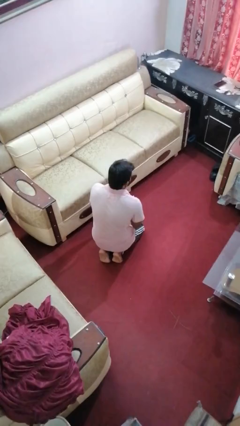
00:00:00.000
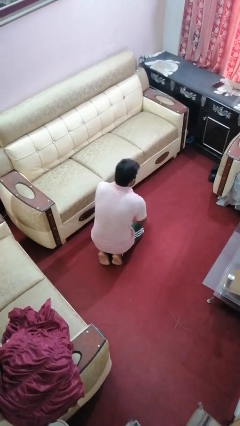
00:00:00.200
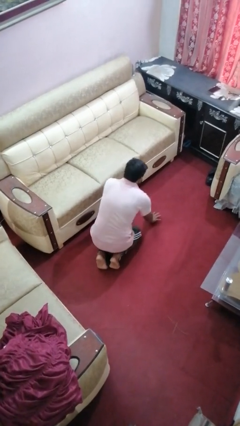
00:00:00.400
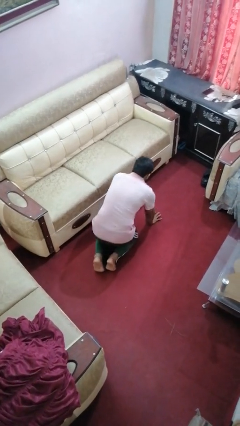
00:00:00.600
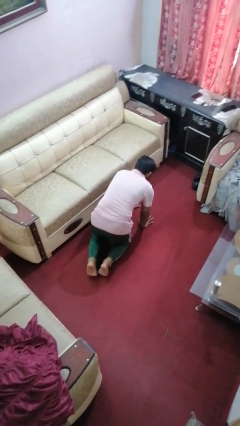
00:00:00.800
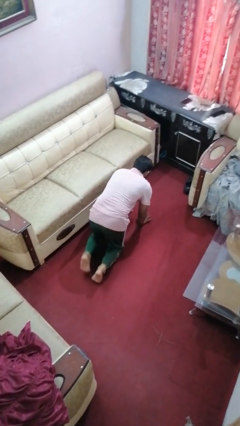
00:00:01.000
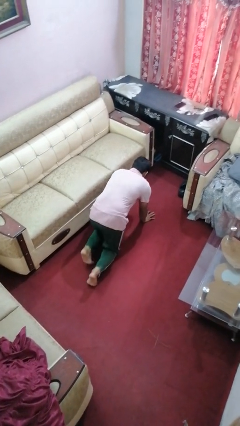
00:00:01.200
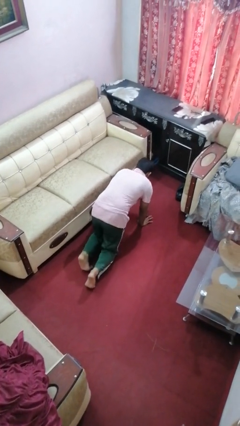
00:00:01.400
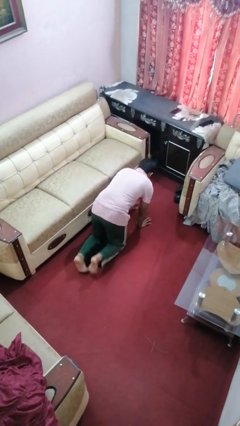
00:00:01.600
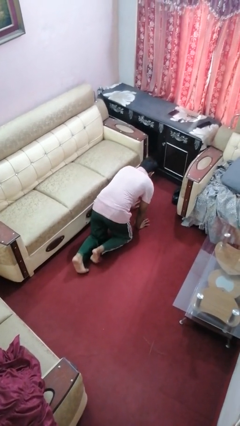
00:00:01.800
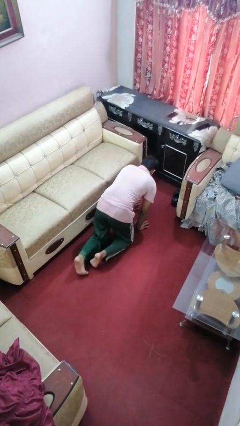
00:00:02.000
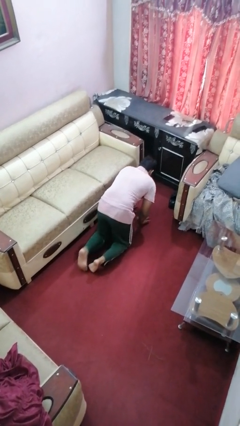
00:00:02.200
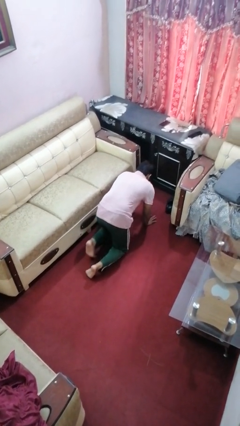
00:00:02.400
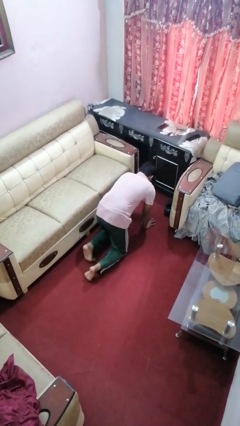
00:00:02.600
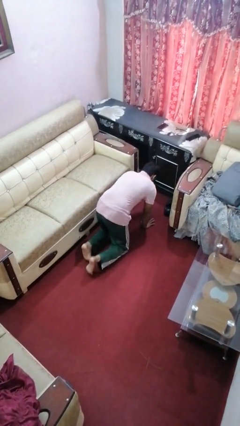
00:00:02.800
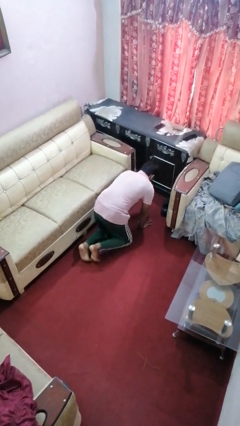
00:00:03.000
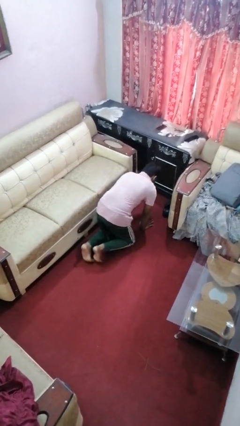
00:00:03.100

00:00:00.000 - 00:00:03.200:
person crawls

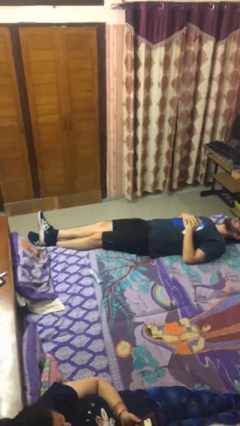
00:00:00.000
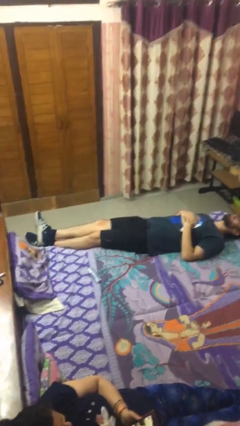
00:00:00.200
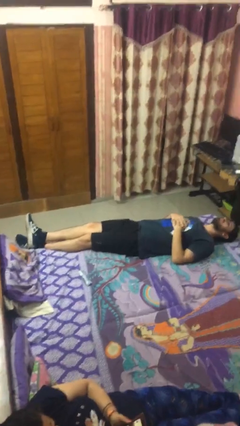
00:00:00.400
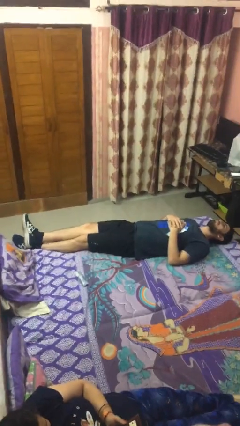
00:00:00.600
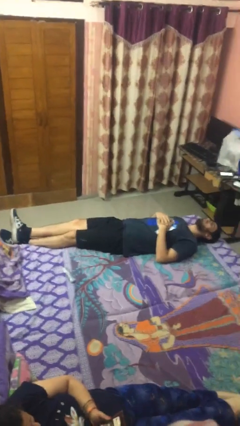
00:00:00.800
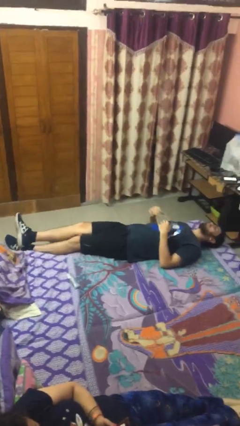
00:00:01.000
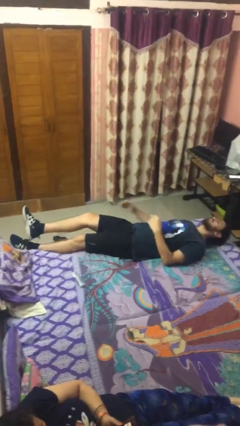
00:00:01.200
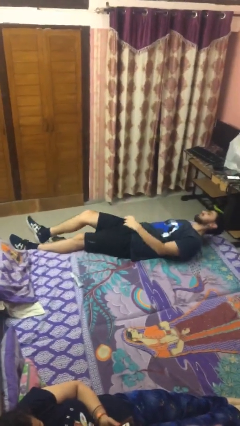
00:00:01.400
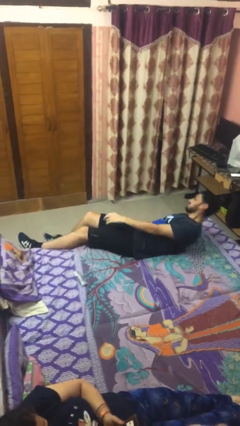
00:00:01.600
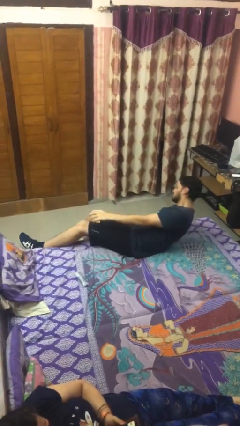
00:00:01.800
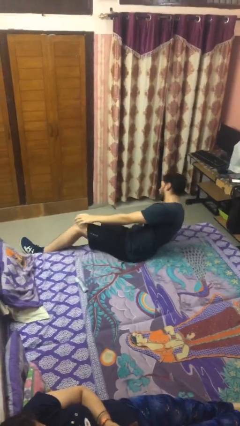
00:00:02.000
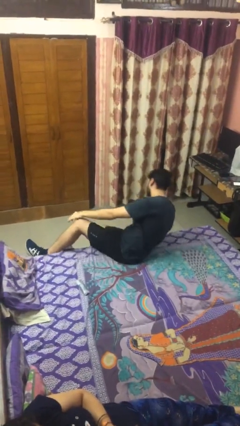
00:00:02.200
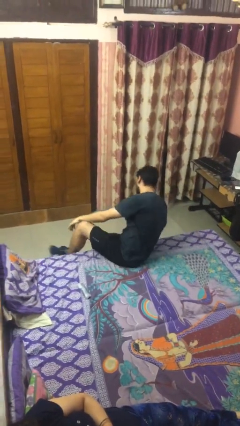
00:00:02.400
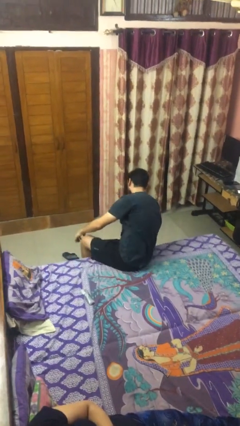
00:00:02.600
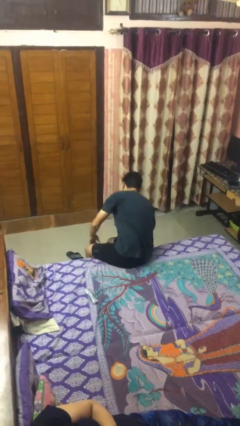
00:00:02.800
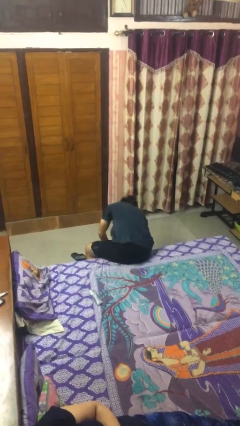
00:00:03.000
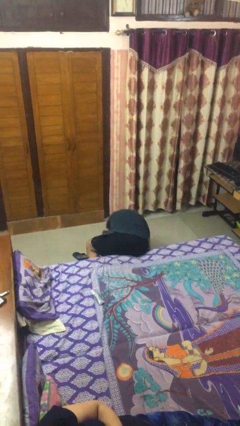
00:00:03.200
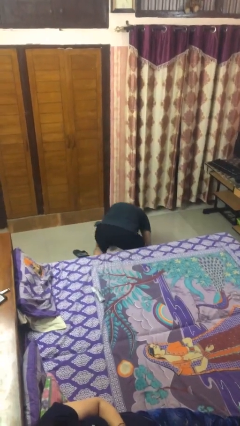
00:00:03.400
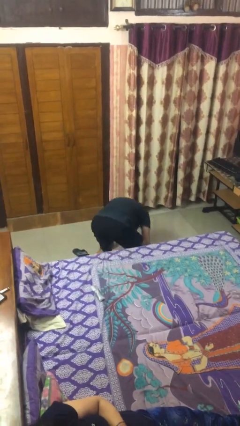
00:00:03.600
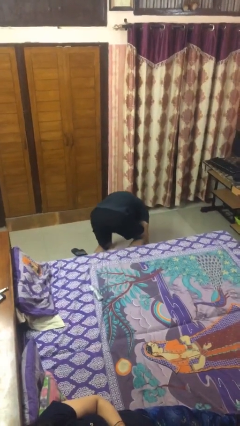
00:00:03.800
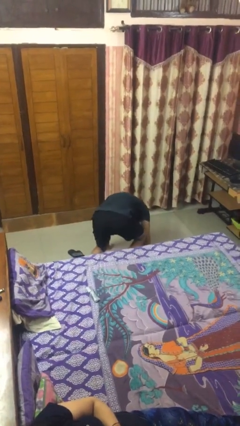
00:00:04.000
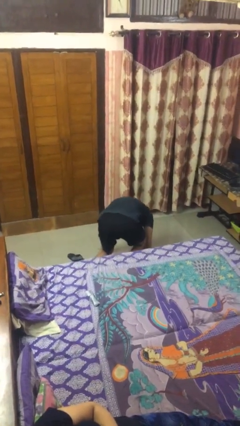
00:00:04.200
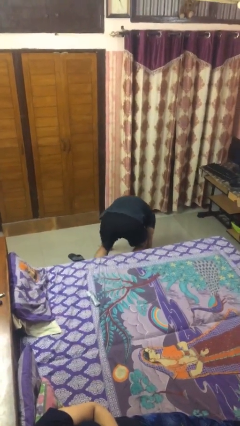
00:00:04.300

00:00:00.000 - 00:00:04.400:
person falls from bed

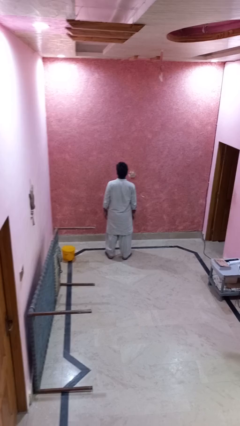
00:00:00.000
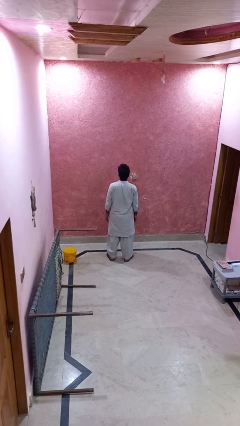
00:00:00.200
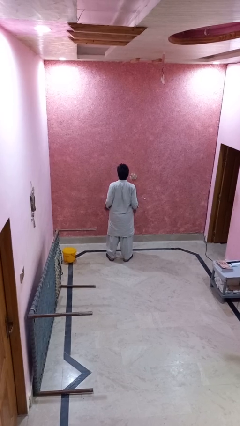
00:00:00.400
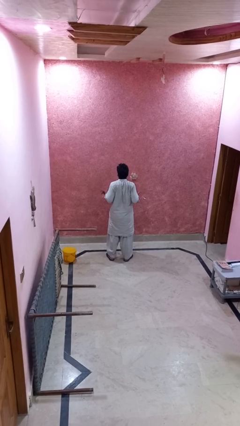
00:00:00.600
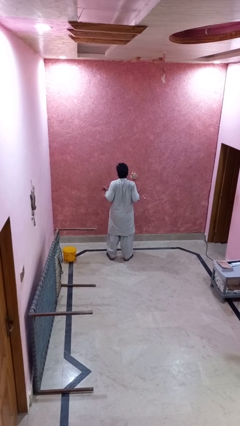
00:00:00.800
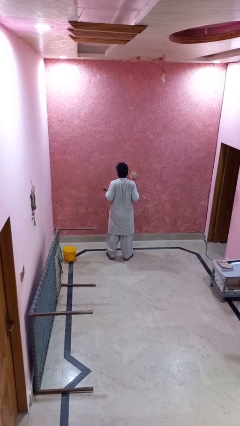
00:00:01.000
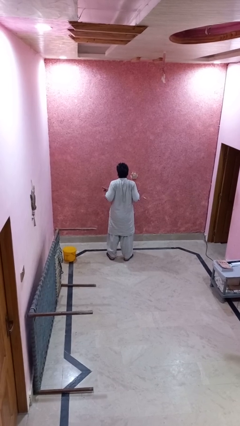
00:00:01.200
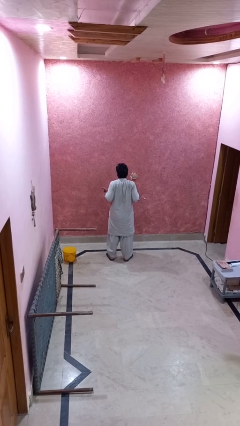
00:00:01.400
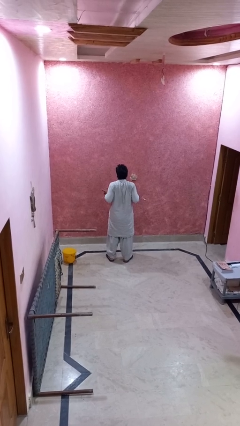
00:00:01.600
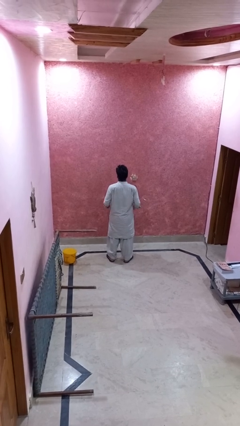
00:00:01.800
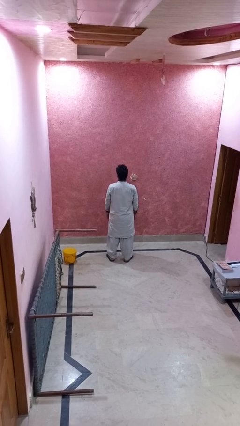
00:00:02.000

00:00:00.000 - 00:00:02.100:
person shrugs

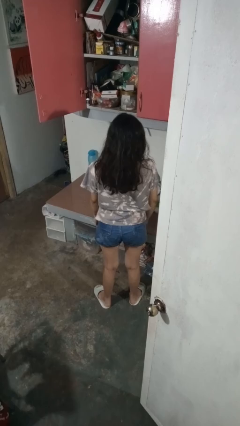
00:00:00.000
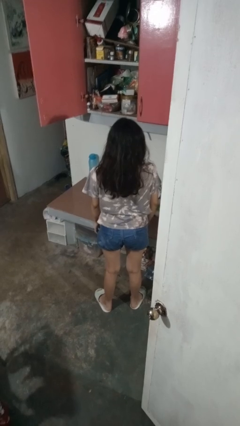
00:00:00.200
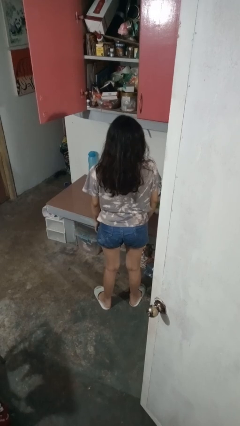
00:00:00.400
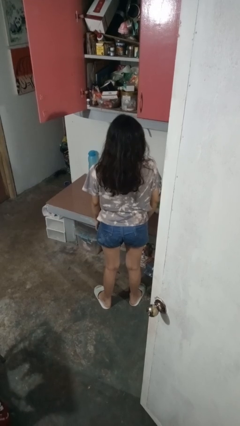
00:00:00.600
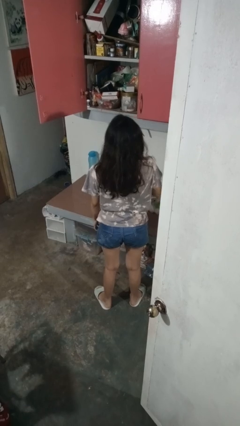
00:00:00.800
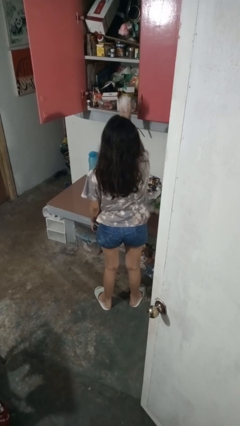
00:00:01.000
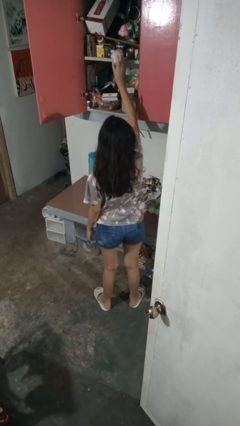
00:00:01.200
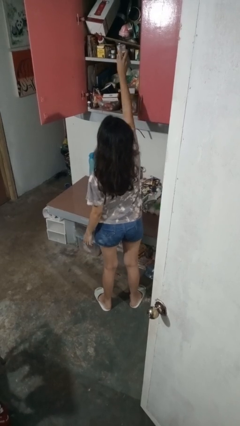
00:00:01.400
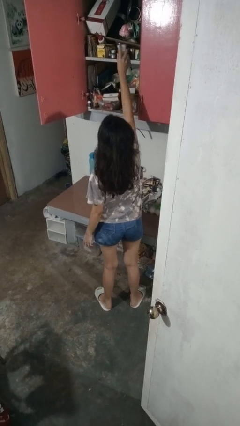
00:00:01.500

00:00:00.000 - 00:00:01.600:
person puts object in cabinet

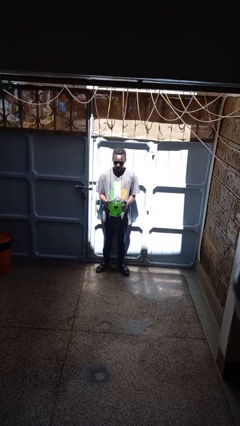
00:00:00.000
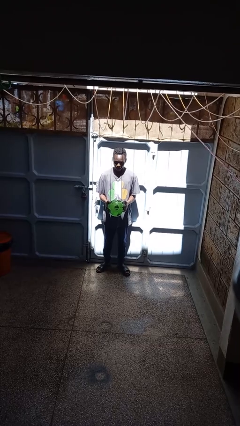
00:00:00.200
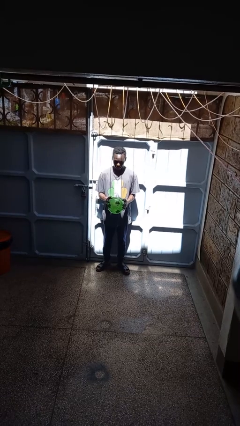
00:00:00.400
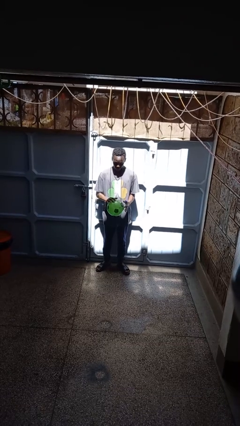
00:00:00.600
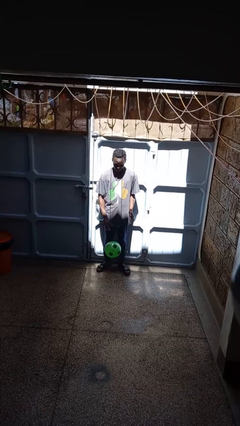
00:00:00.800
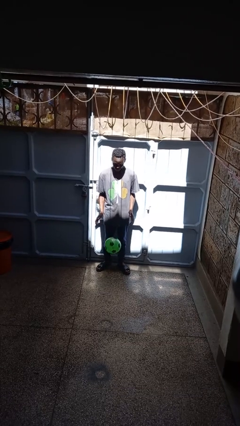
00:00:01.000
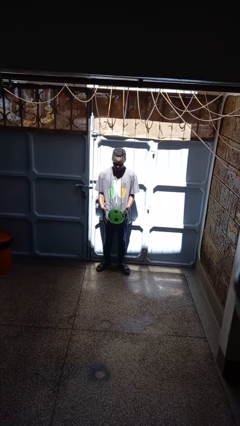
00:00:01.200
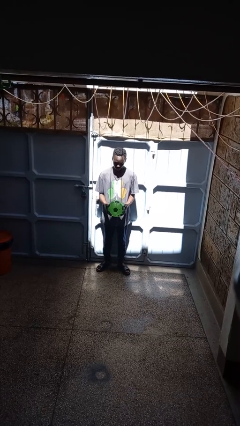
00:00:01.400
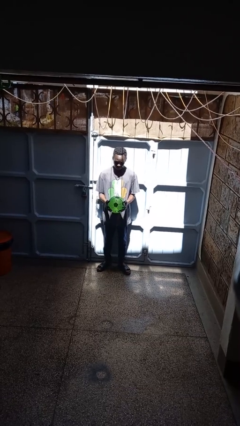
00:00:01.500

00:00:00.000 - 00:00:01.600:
person bounces ball on floor

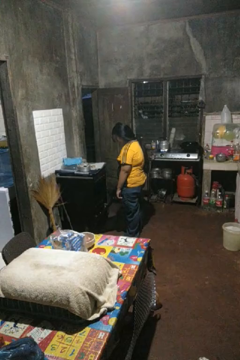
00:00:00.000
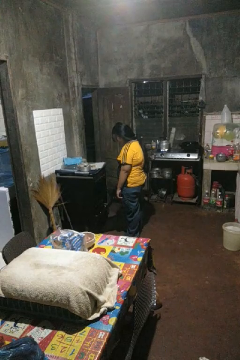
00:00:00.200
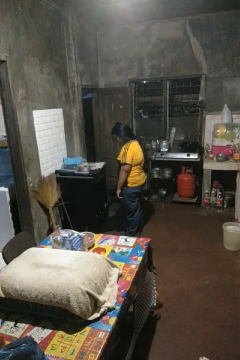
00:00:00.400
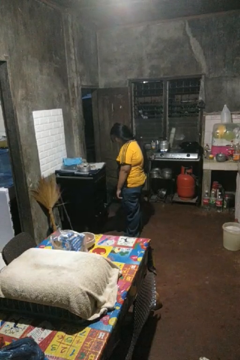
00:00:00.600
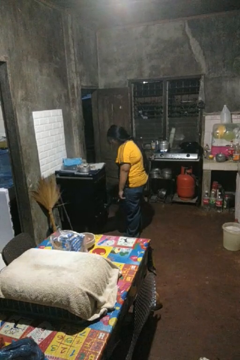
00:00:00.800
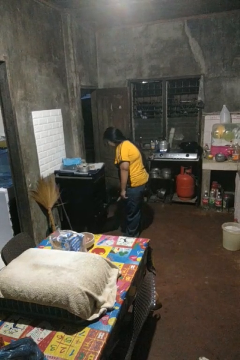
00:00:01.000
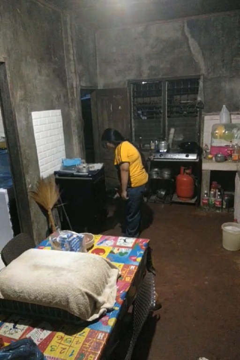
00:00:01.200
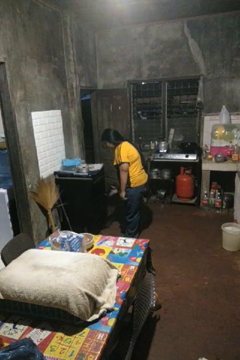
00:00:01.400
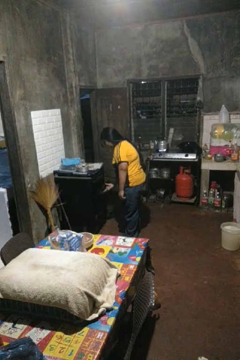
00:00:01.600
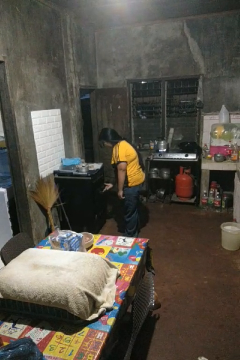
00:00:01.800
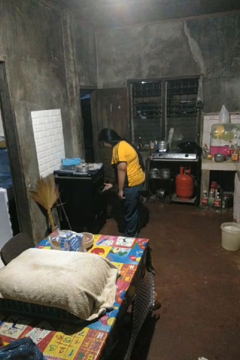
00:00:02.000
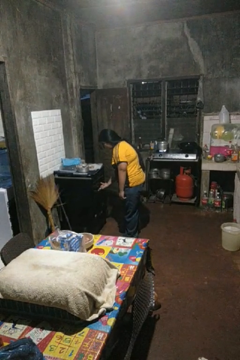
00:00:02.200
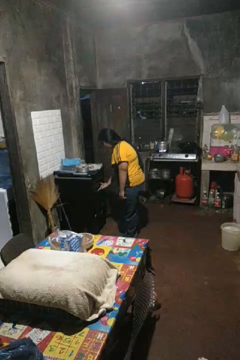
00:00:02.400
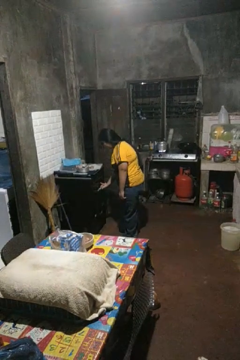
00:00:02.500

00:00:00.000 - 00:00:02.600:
person closes oven door

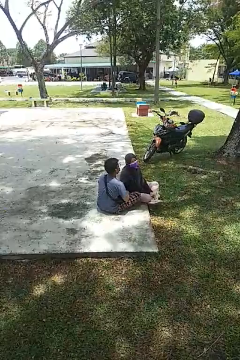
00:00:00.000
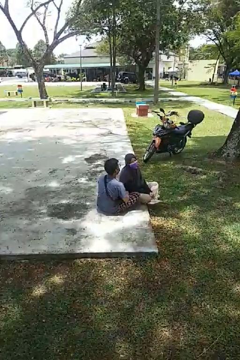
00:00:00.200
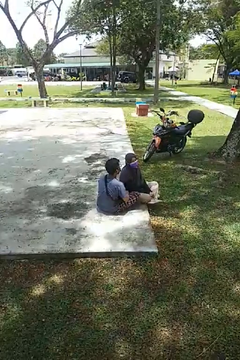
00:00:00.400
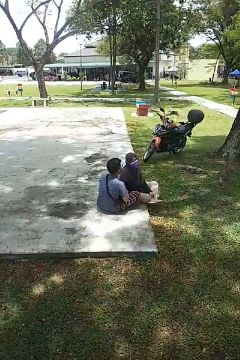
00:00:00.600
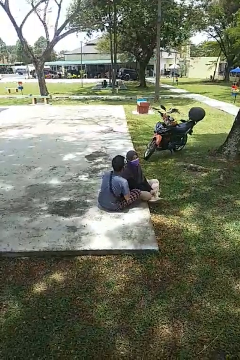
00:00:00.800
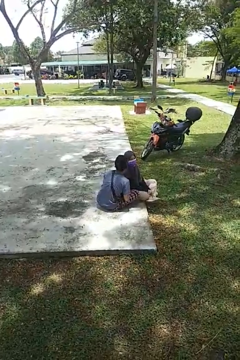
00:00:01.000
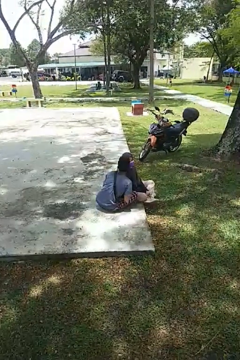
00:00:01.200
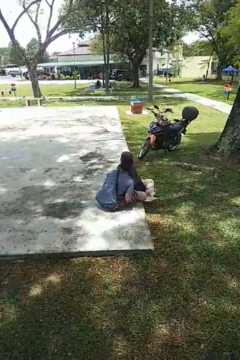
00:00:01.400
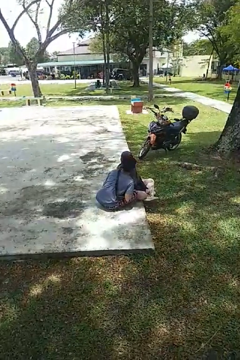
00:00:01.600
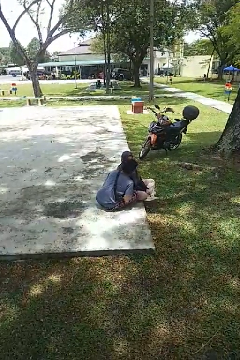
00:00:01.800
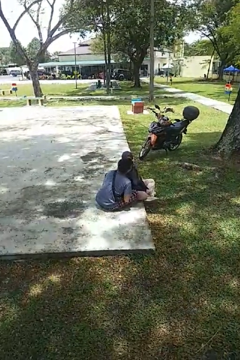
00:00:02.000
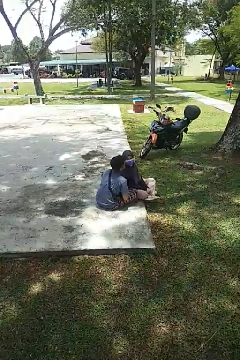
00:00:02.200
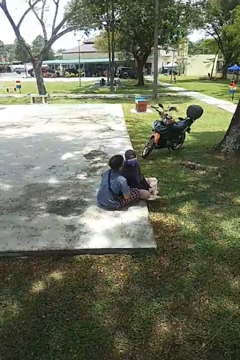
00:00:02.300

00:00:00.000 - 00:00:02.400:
person kisses cheek of person

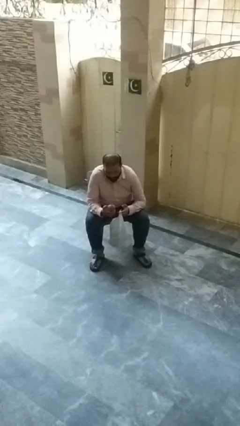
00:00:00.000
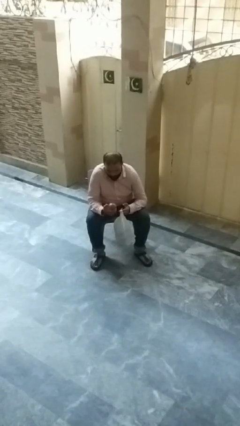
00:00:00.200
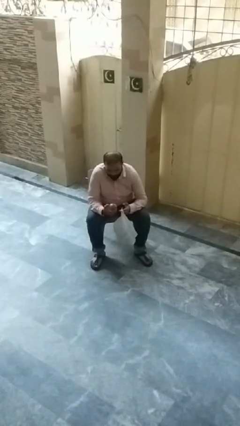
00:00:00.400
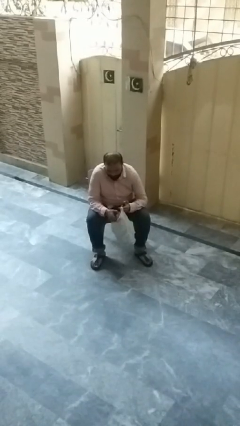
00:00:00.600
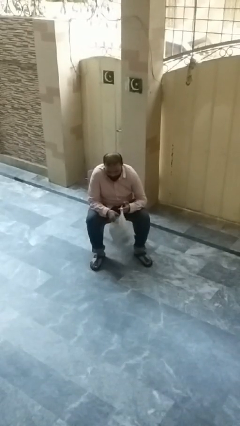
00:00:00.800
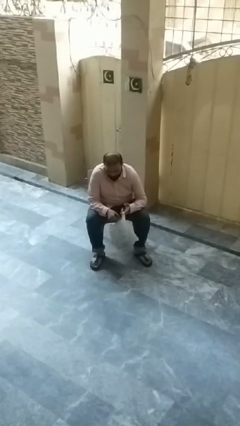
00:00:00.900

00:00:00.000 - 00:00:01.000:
person puts object into bag
